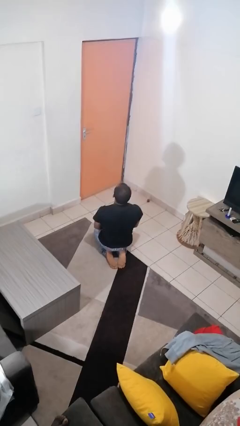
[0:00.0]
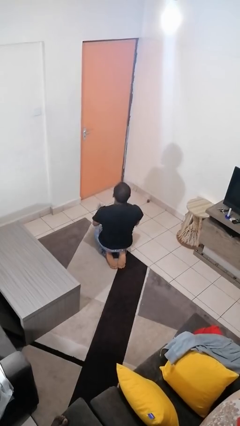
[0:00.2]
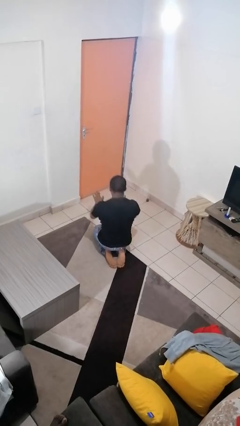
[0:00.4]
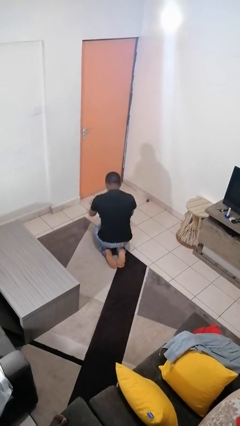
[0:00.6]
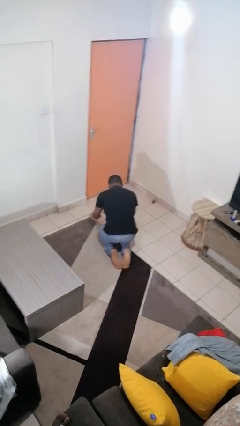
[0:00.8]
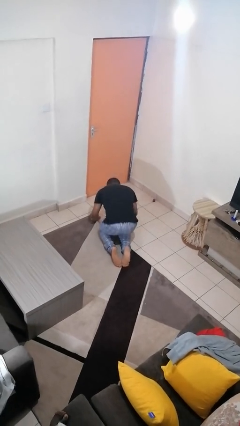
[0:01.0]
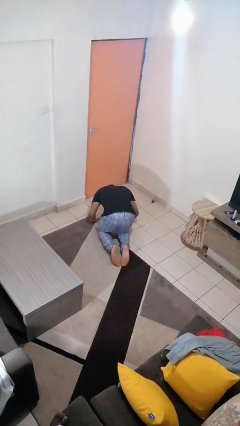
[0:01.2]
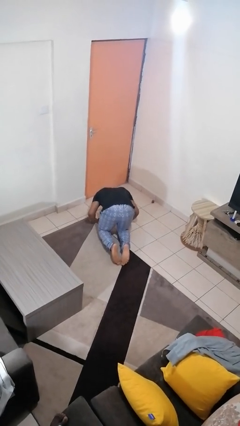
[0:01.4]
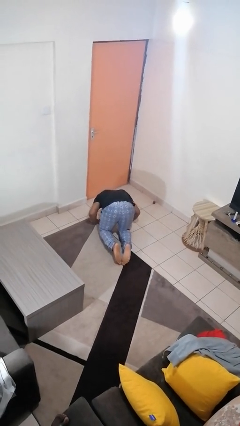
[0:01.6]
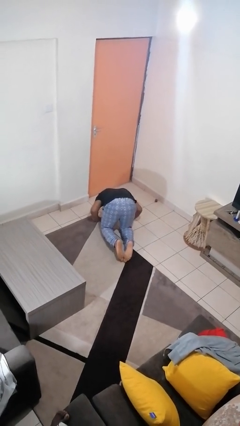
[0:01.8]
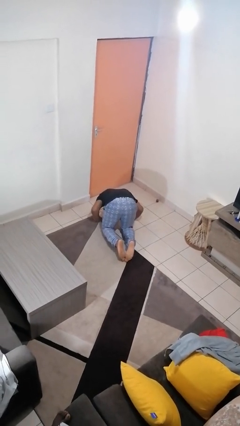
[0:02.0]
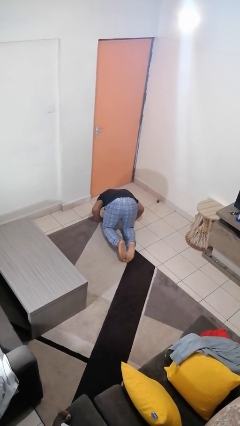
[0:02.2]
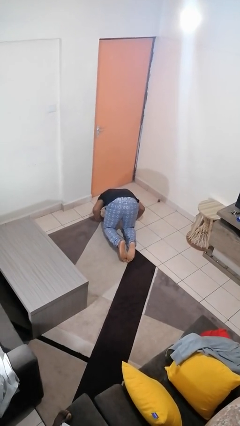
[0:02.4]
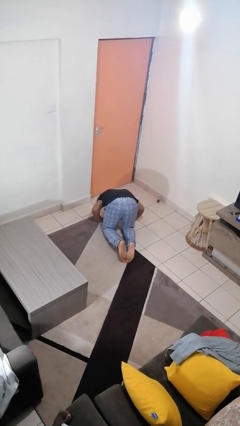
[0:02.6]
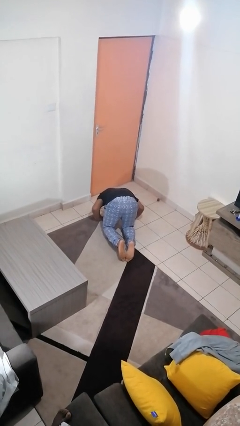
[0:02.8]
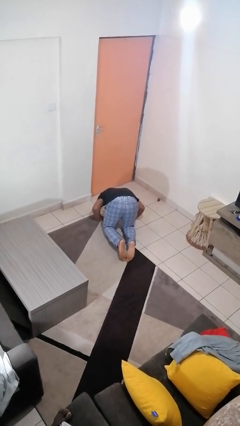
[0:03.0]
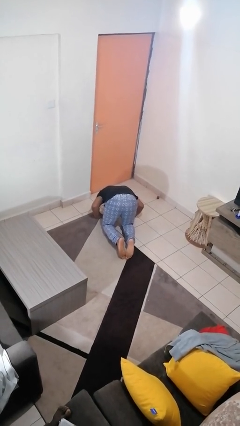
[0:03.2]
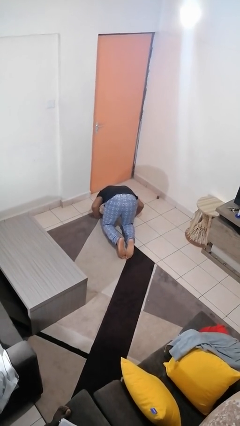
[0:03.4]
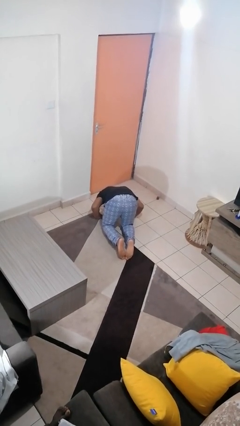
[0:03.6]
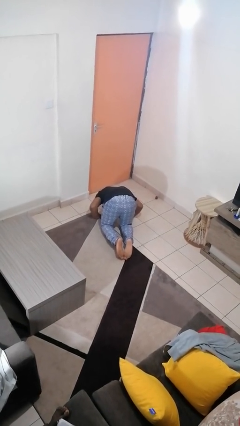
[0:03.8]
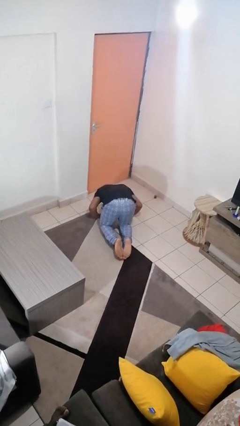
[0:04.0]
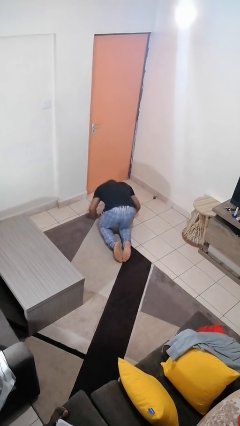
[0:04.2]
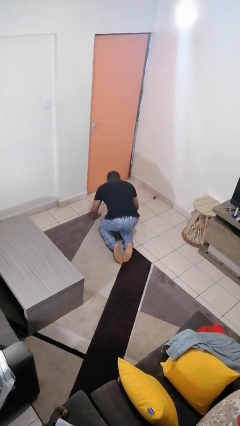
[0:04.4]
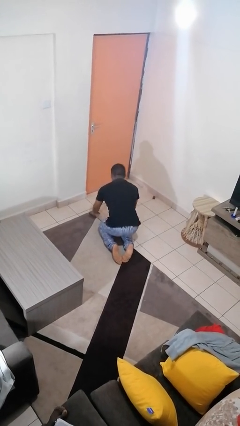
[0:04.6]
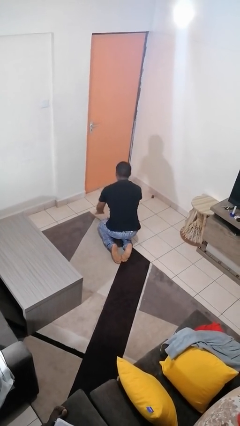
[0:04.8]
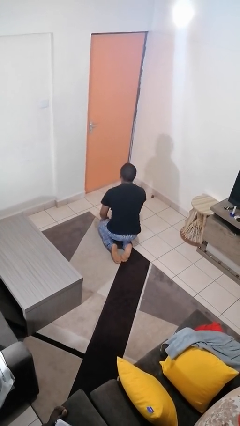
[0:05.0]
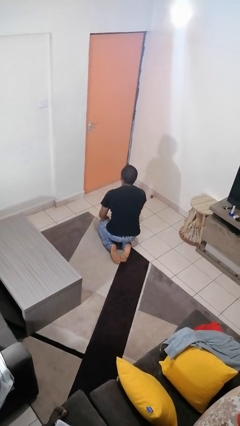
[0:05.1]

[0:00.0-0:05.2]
person prays

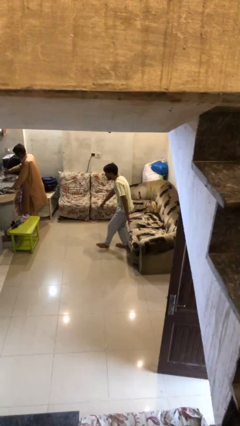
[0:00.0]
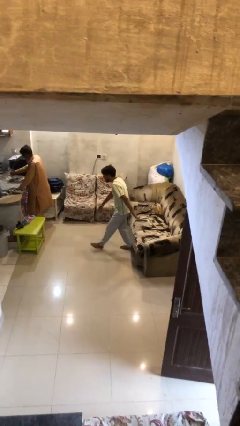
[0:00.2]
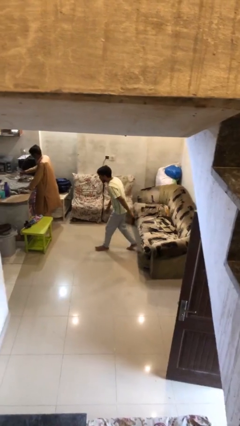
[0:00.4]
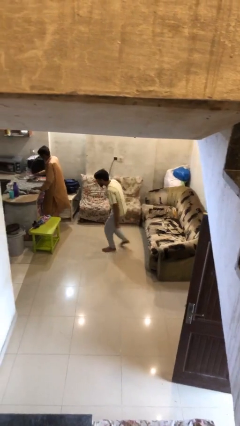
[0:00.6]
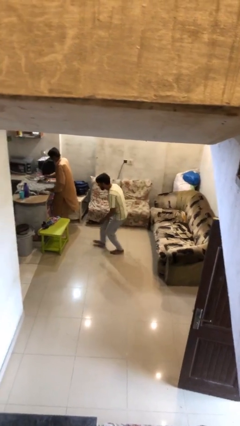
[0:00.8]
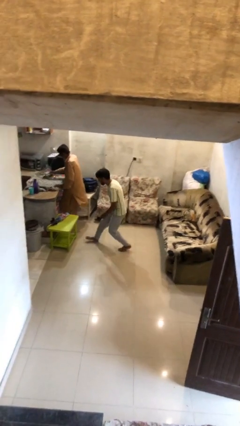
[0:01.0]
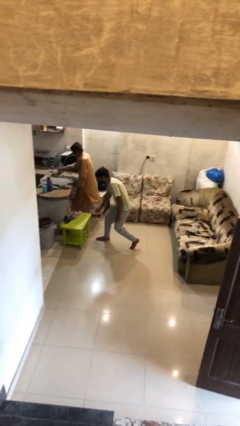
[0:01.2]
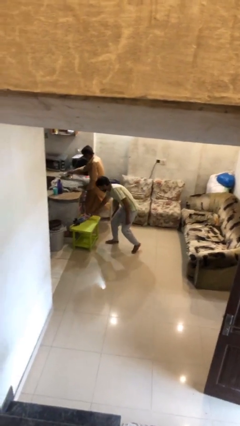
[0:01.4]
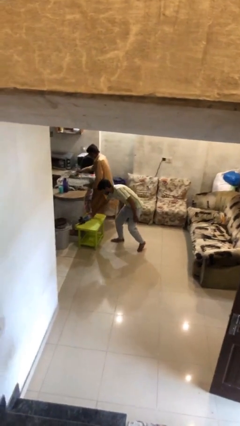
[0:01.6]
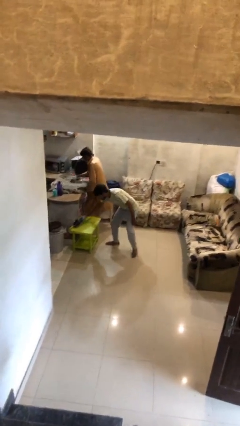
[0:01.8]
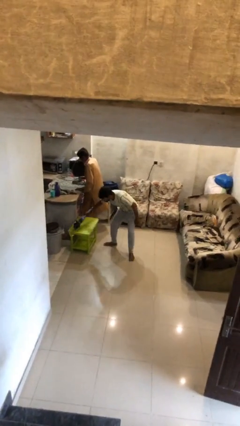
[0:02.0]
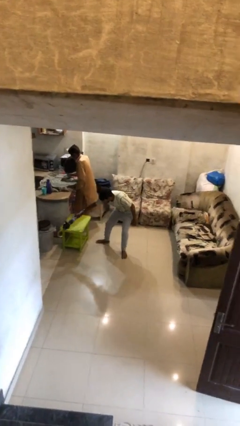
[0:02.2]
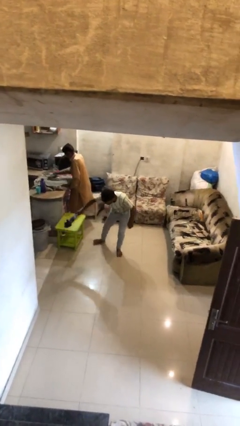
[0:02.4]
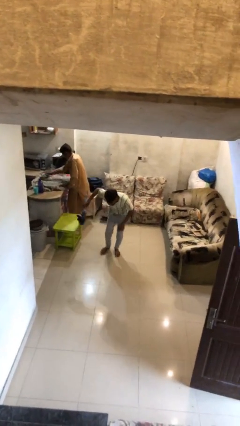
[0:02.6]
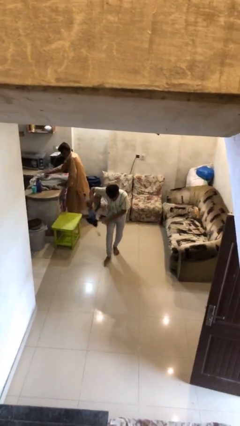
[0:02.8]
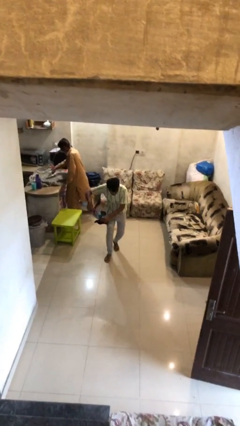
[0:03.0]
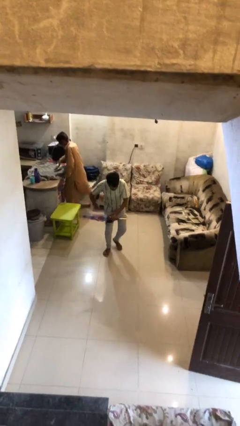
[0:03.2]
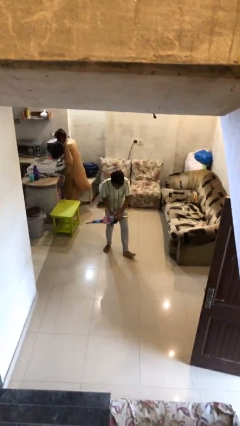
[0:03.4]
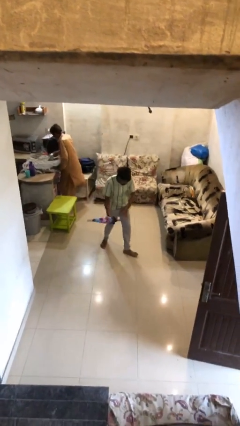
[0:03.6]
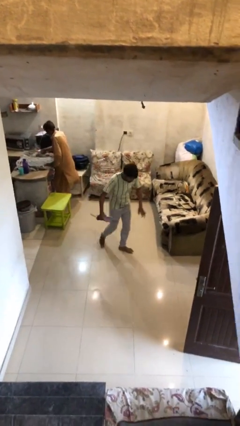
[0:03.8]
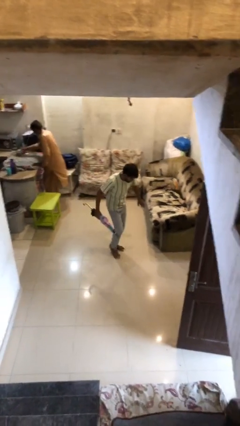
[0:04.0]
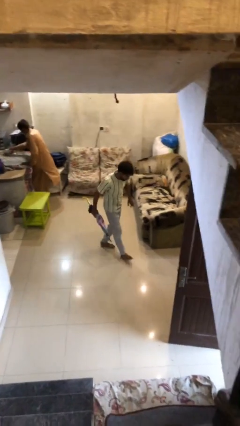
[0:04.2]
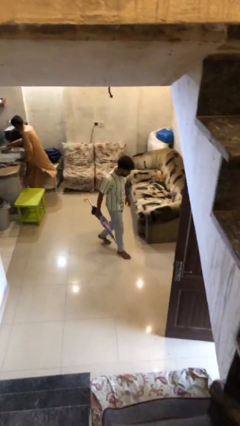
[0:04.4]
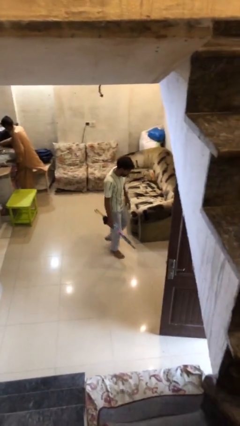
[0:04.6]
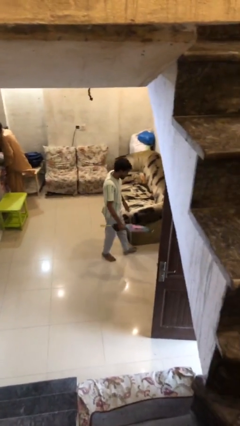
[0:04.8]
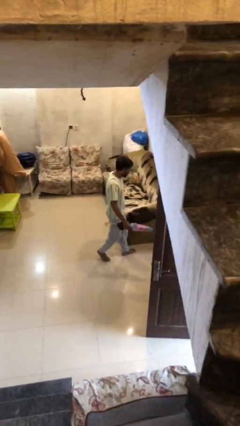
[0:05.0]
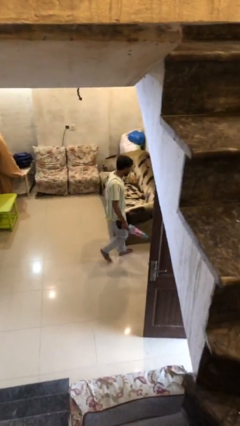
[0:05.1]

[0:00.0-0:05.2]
person steals object from person

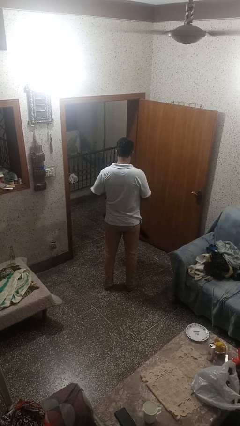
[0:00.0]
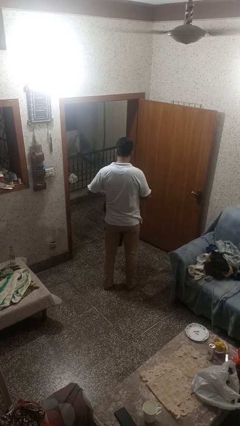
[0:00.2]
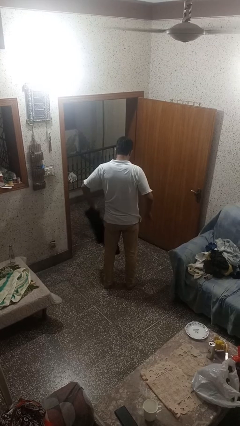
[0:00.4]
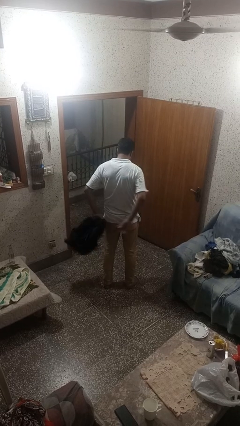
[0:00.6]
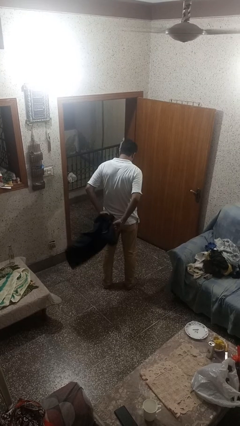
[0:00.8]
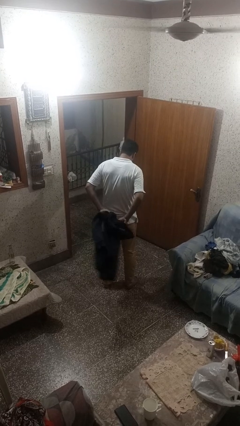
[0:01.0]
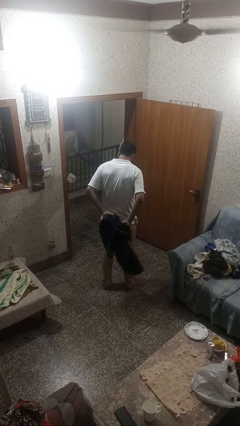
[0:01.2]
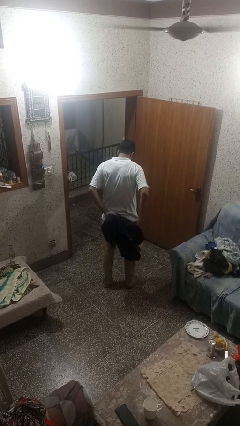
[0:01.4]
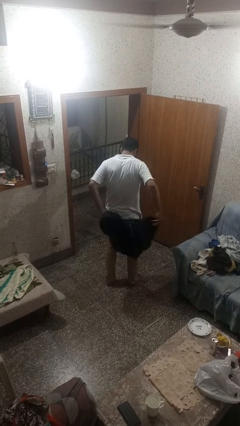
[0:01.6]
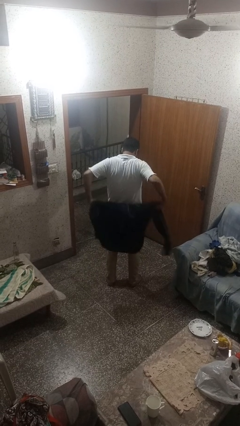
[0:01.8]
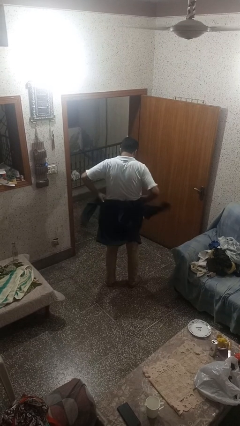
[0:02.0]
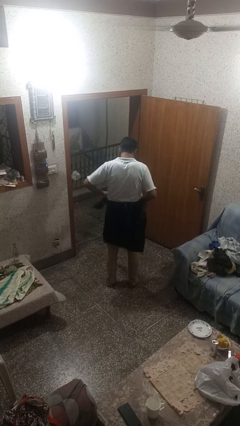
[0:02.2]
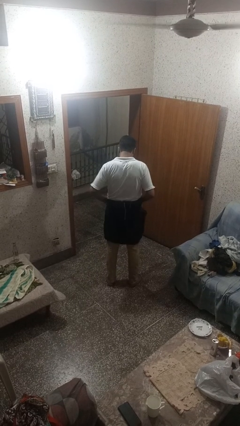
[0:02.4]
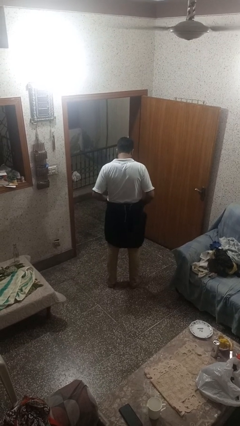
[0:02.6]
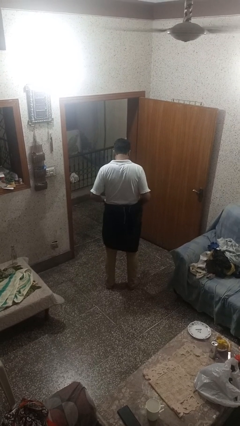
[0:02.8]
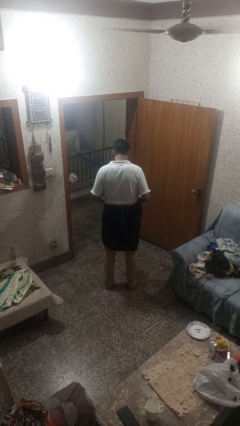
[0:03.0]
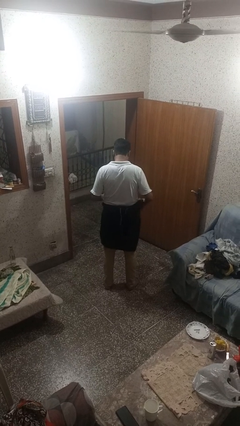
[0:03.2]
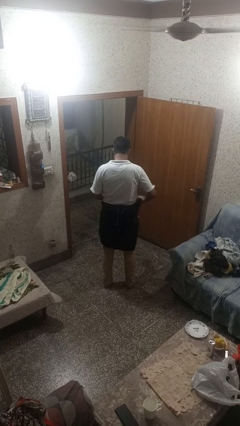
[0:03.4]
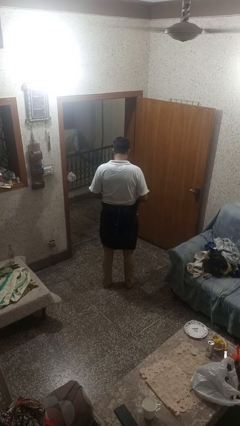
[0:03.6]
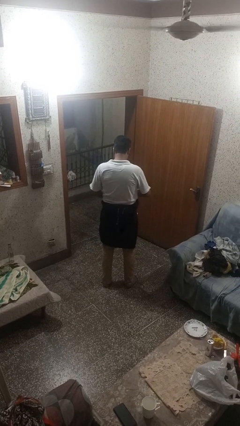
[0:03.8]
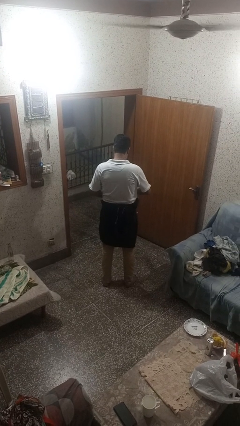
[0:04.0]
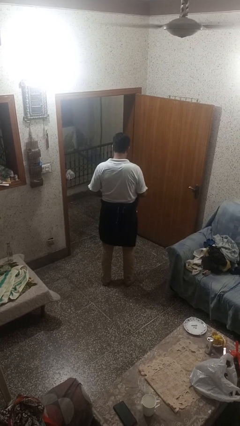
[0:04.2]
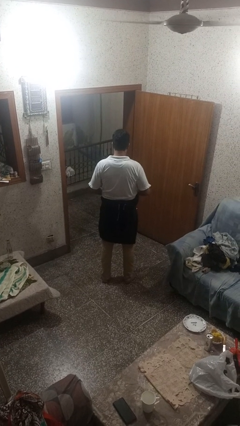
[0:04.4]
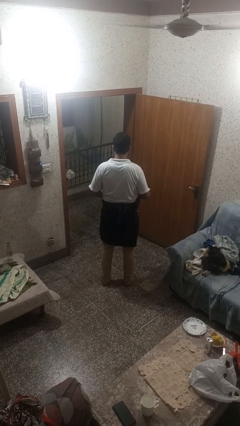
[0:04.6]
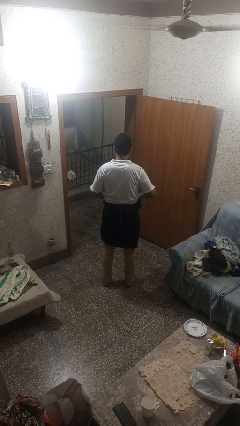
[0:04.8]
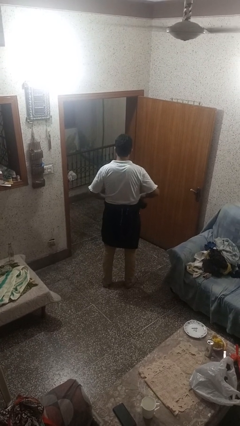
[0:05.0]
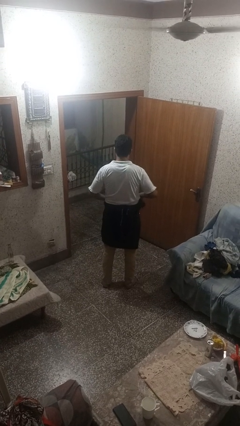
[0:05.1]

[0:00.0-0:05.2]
person ties jacket around waist

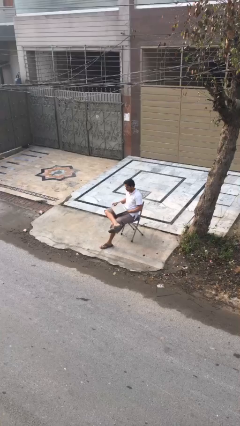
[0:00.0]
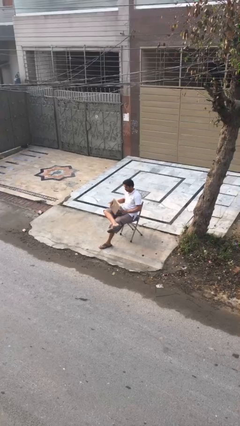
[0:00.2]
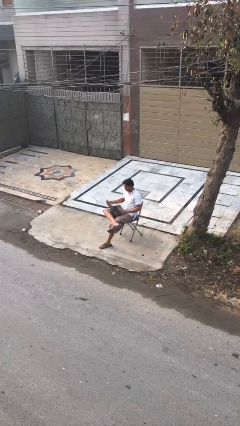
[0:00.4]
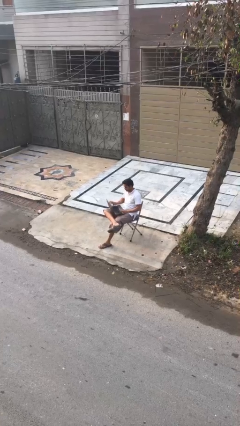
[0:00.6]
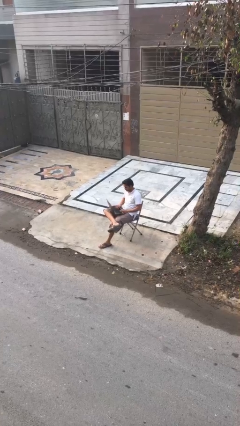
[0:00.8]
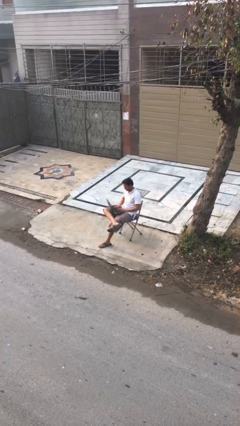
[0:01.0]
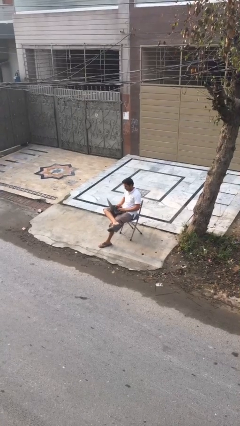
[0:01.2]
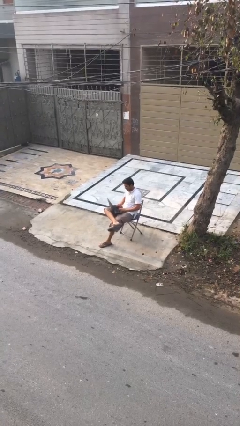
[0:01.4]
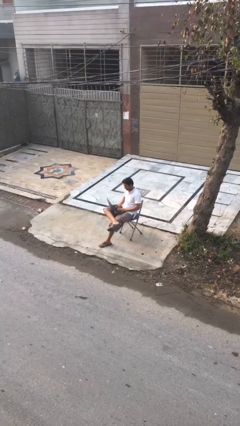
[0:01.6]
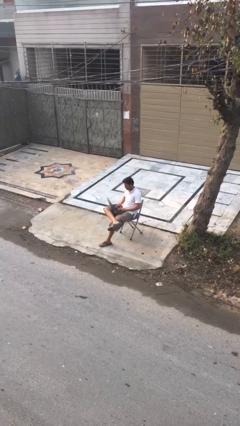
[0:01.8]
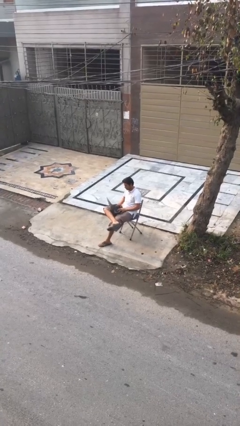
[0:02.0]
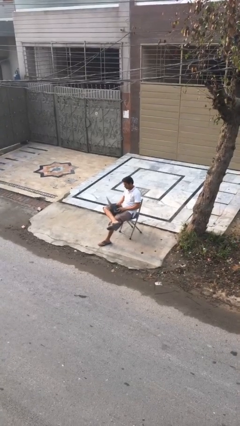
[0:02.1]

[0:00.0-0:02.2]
person interacts with laptop
